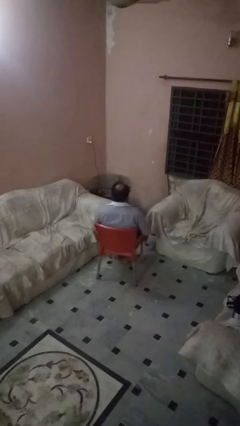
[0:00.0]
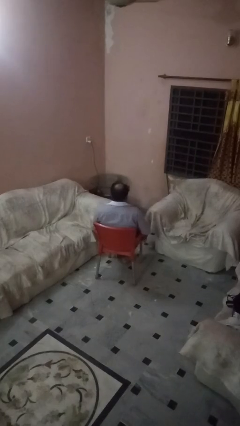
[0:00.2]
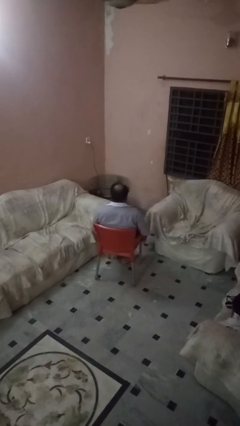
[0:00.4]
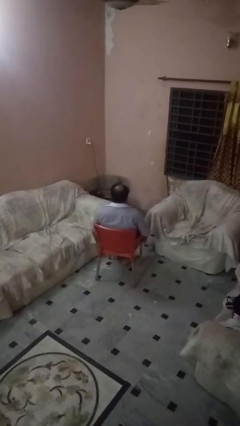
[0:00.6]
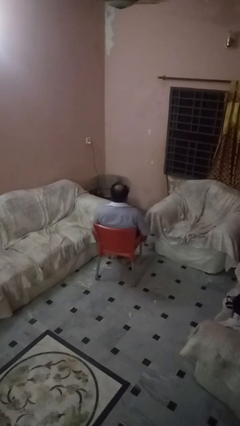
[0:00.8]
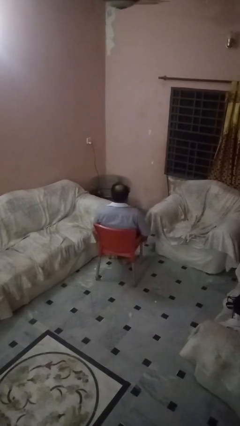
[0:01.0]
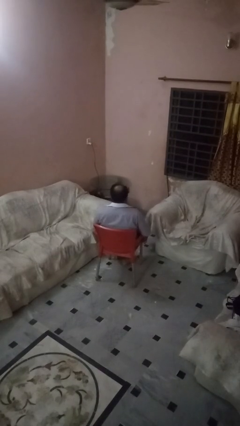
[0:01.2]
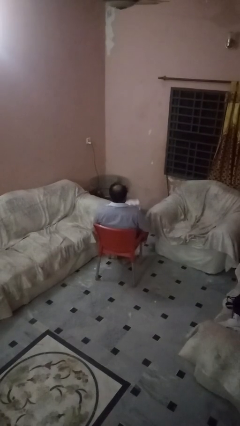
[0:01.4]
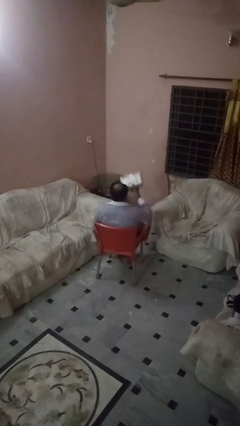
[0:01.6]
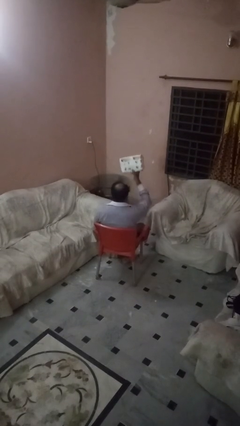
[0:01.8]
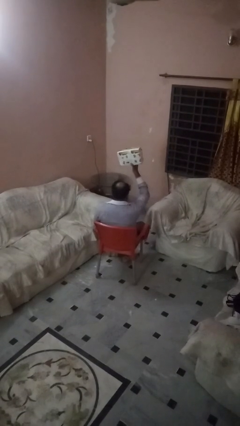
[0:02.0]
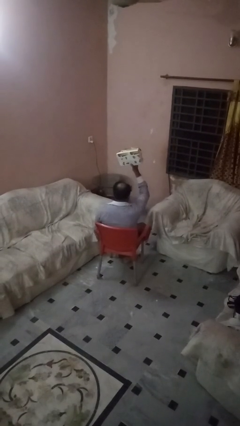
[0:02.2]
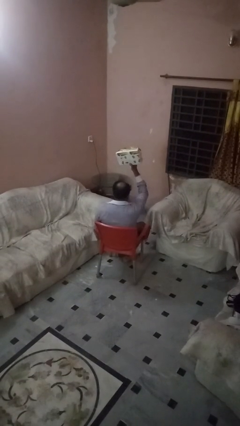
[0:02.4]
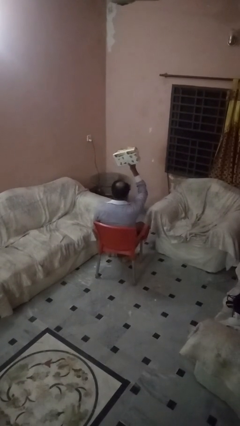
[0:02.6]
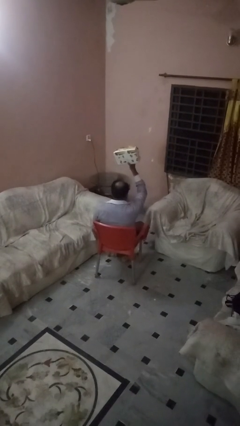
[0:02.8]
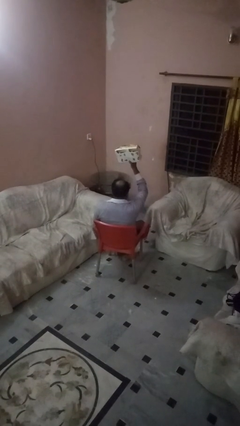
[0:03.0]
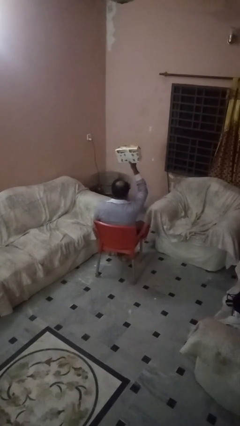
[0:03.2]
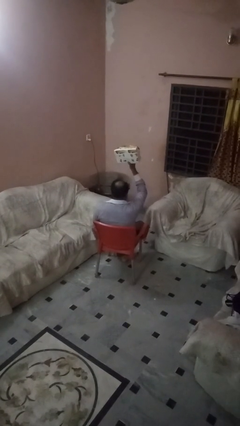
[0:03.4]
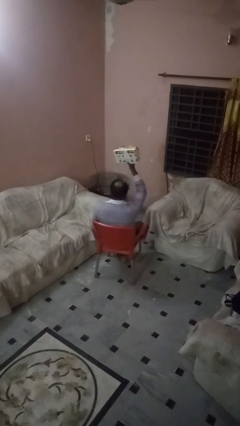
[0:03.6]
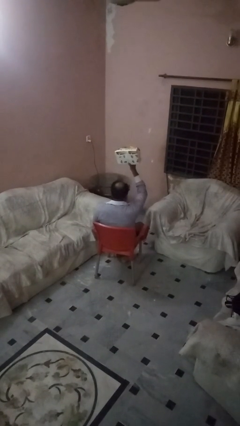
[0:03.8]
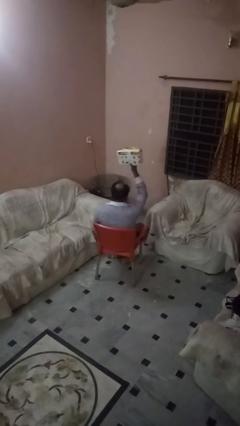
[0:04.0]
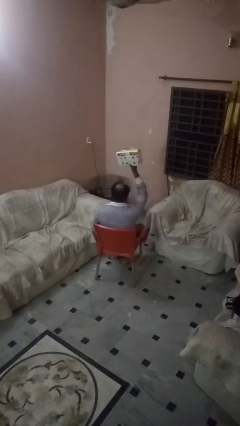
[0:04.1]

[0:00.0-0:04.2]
person holds object above head

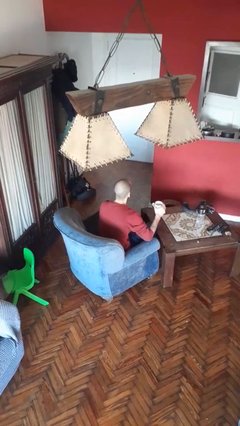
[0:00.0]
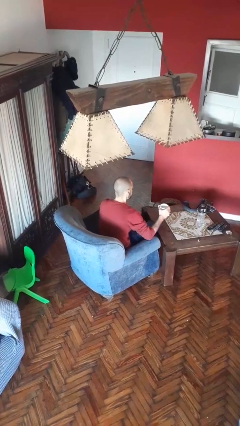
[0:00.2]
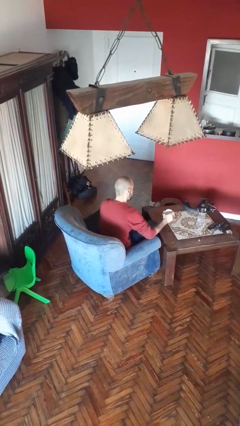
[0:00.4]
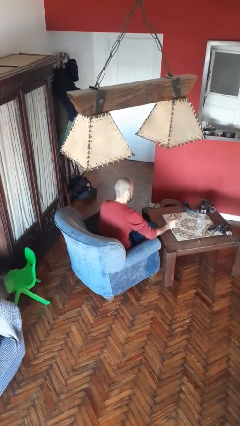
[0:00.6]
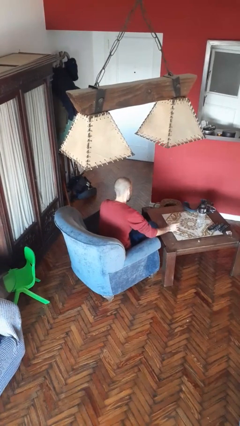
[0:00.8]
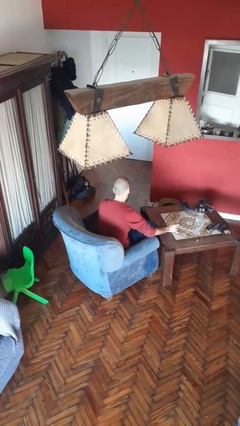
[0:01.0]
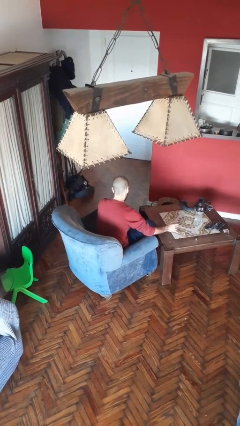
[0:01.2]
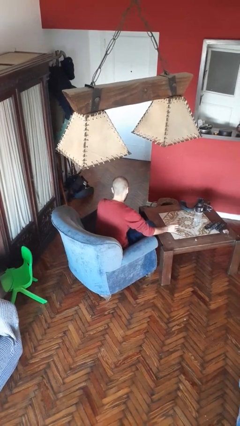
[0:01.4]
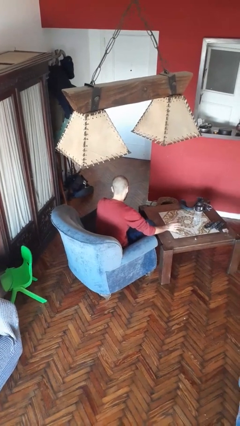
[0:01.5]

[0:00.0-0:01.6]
person puts down object on table

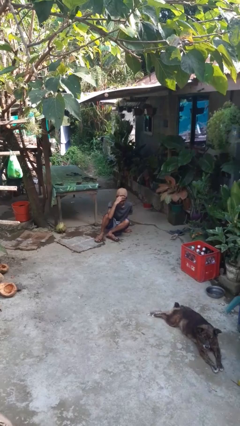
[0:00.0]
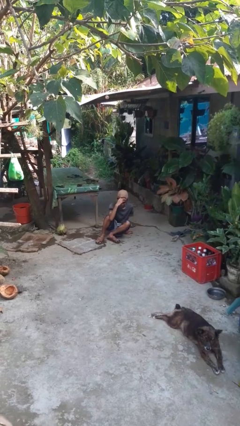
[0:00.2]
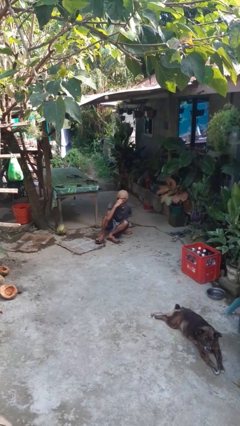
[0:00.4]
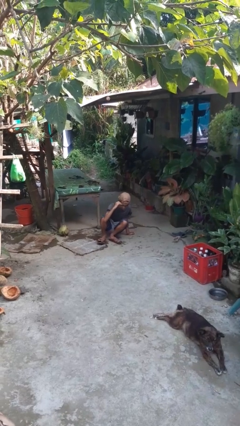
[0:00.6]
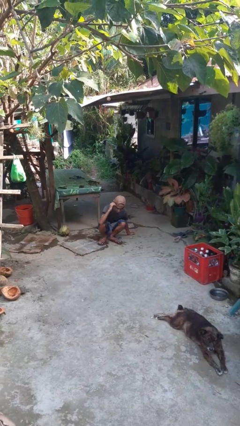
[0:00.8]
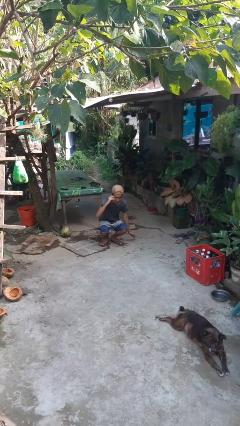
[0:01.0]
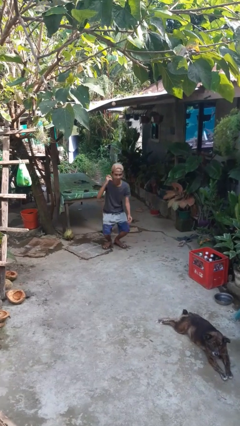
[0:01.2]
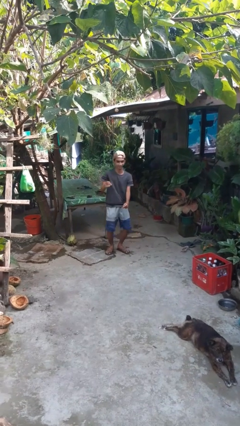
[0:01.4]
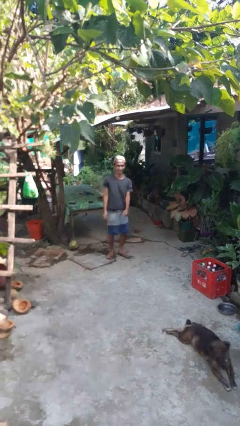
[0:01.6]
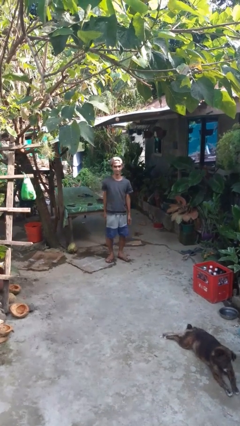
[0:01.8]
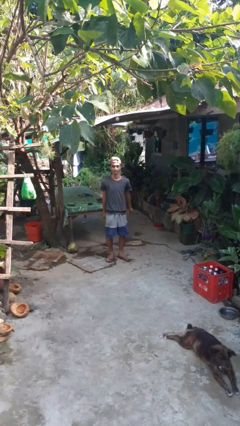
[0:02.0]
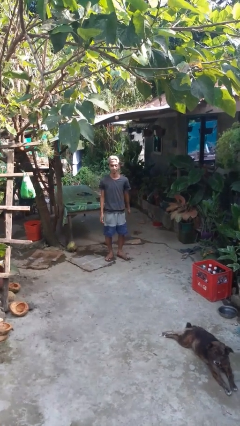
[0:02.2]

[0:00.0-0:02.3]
person stands up from floor

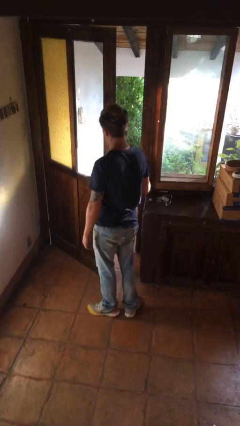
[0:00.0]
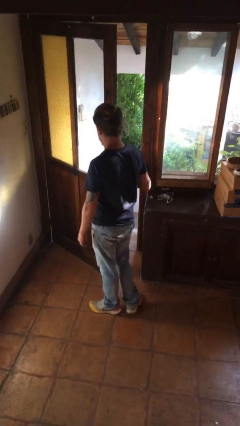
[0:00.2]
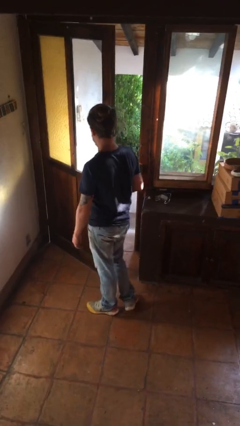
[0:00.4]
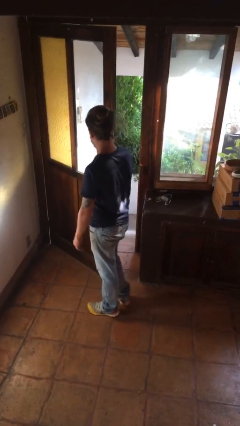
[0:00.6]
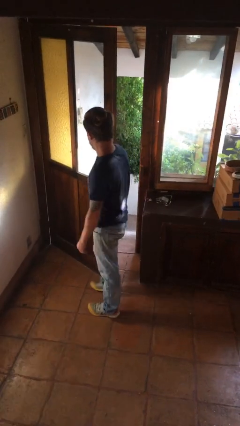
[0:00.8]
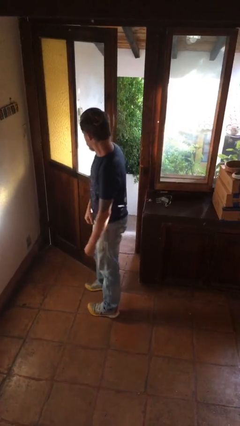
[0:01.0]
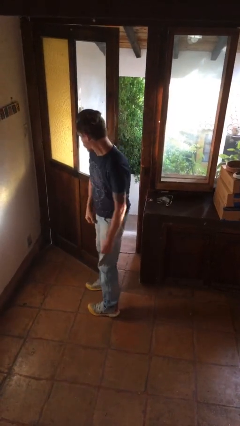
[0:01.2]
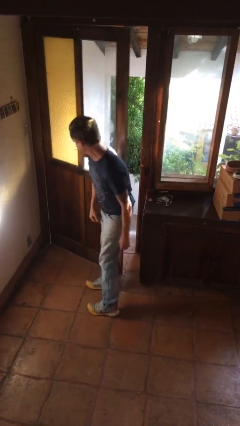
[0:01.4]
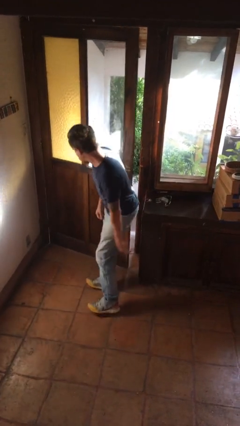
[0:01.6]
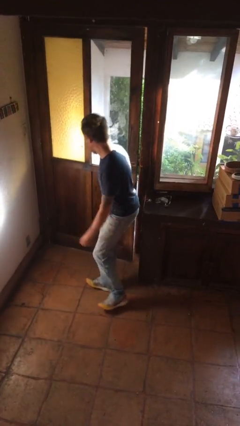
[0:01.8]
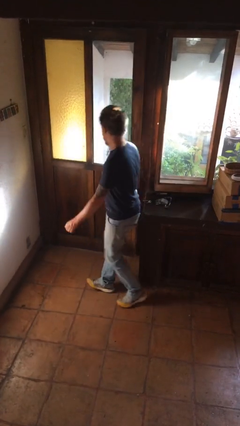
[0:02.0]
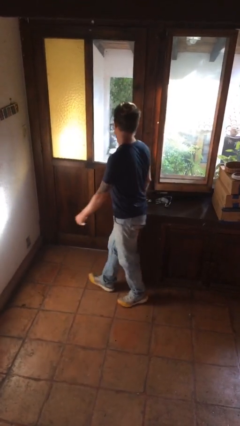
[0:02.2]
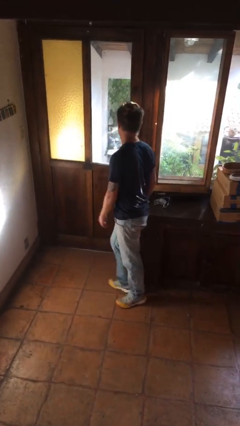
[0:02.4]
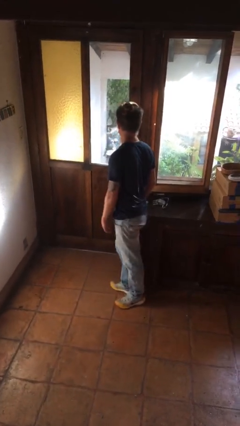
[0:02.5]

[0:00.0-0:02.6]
person closes door with hip

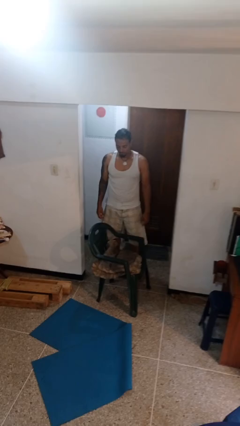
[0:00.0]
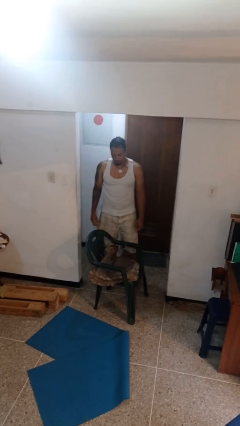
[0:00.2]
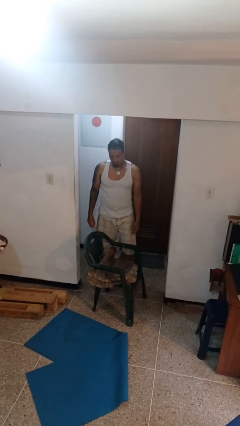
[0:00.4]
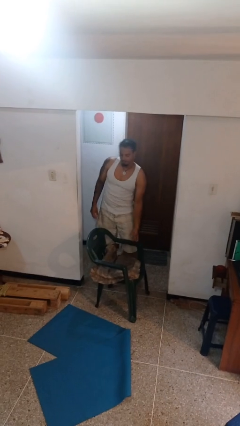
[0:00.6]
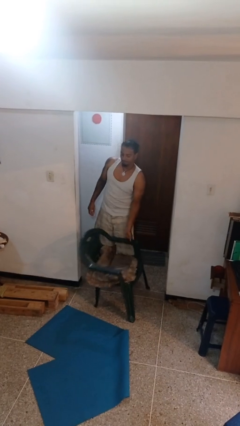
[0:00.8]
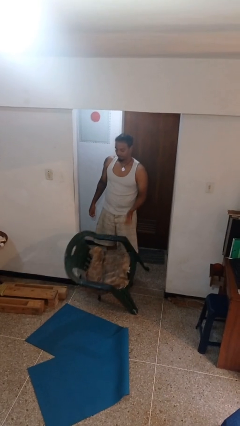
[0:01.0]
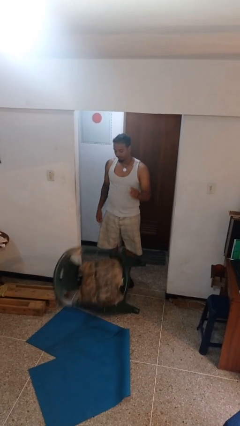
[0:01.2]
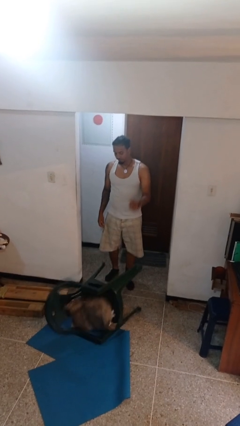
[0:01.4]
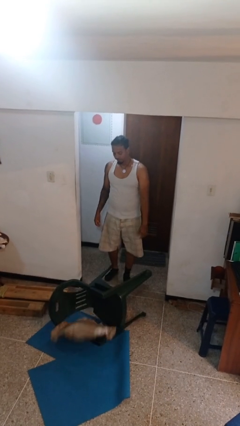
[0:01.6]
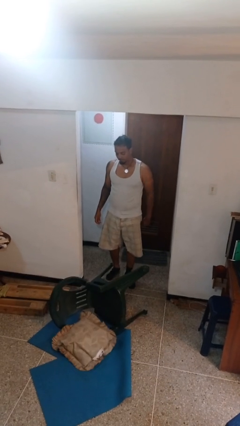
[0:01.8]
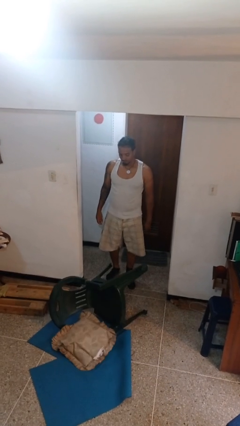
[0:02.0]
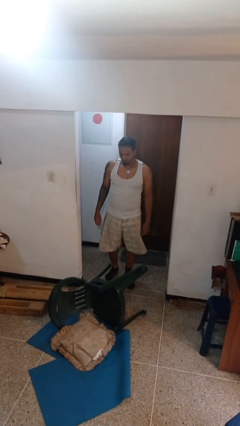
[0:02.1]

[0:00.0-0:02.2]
person knocks over furniture

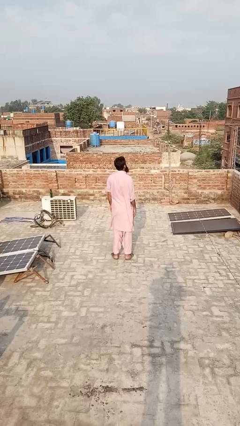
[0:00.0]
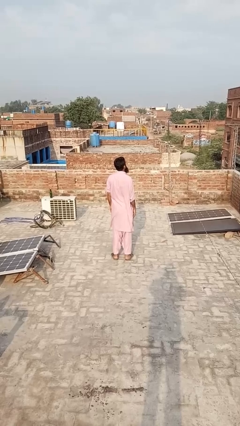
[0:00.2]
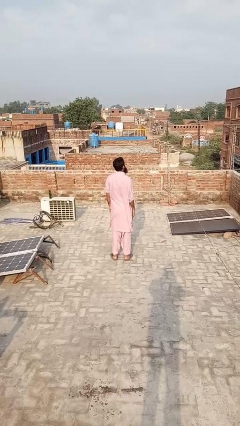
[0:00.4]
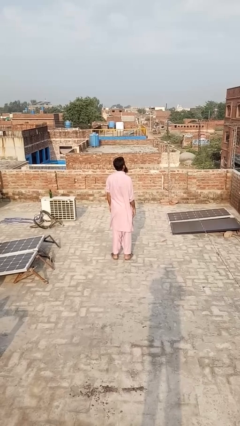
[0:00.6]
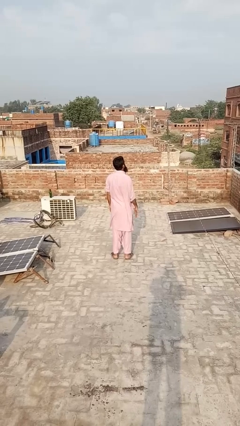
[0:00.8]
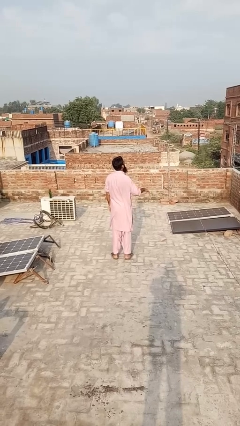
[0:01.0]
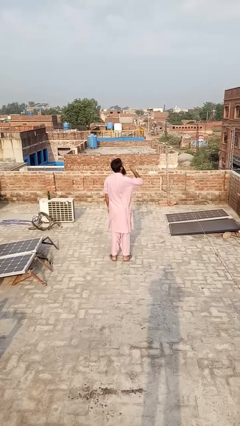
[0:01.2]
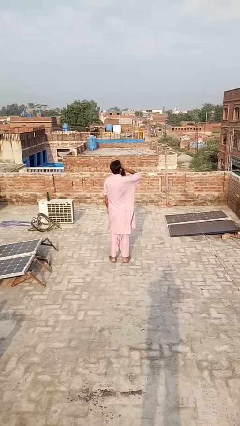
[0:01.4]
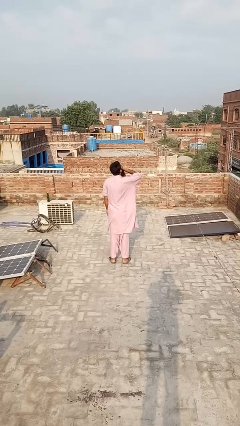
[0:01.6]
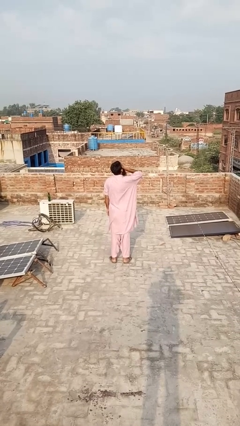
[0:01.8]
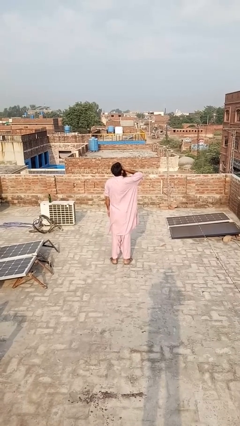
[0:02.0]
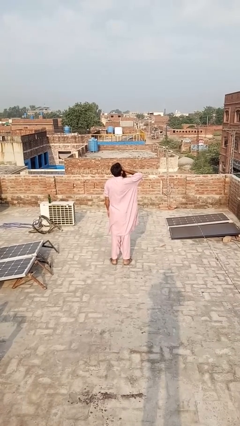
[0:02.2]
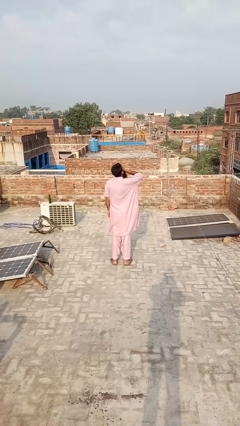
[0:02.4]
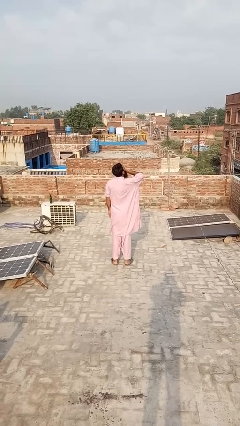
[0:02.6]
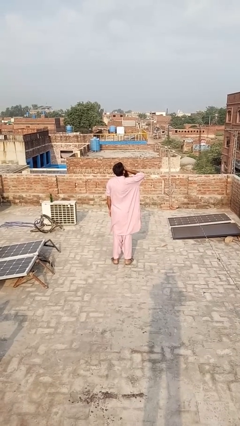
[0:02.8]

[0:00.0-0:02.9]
person yawns

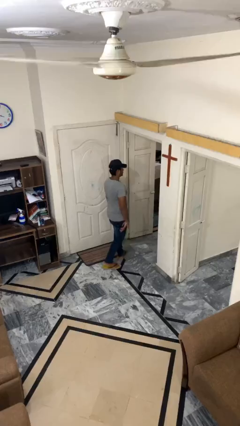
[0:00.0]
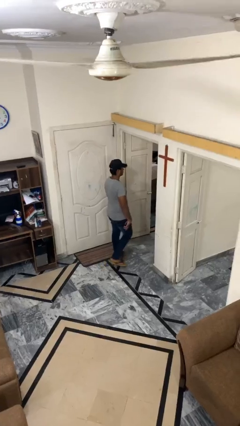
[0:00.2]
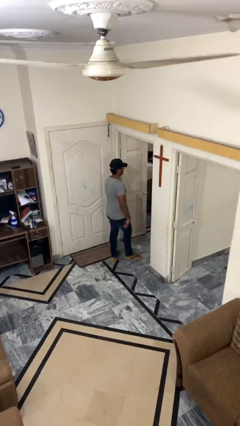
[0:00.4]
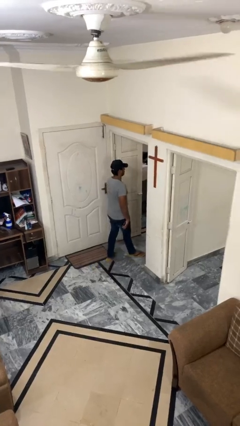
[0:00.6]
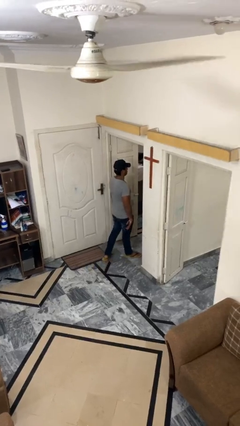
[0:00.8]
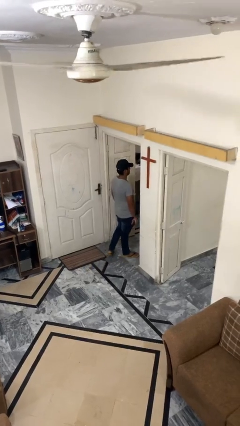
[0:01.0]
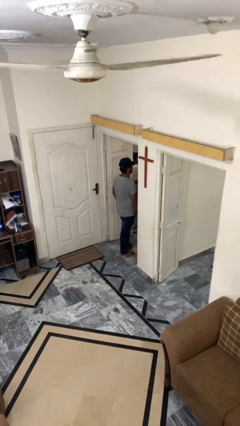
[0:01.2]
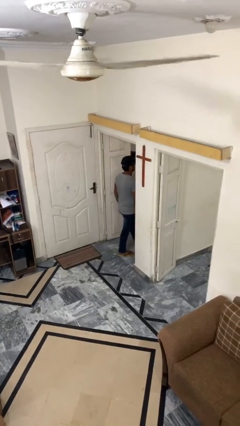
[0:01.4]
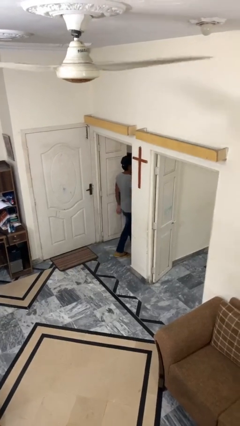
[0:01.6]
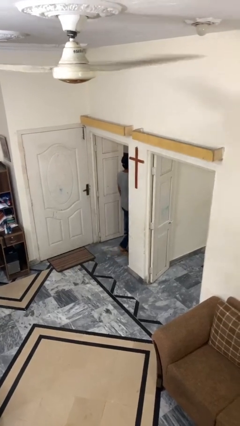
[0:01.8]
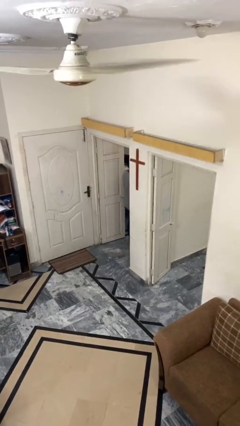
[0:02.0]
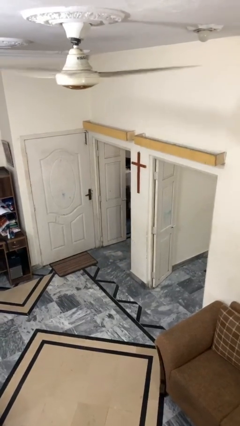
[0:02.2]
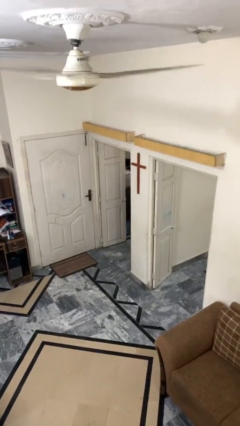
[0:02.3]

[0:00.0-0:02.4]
person exits scene through structure
